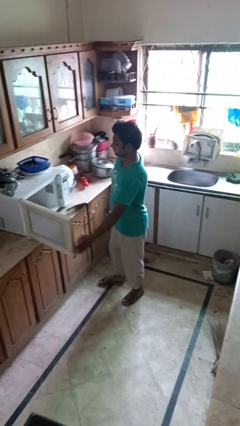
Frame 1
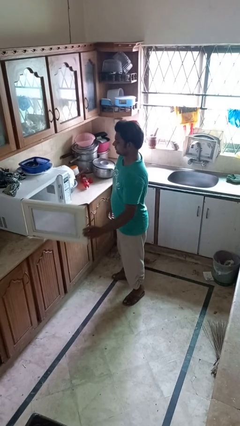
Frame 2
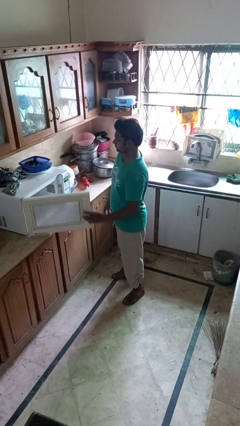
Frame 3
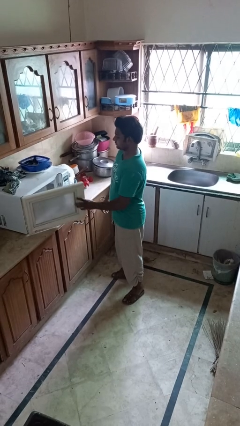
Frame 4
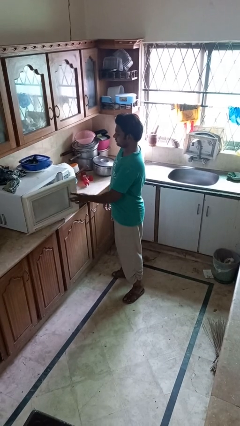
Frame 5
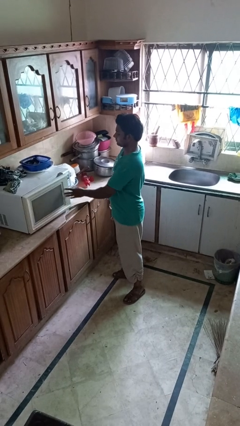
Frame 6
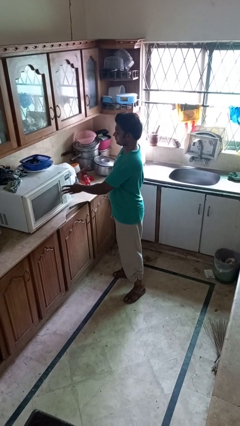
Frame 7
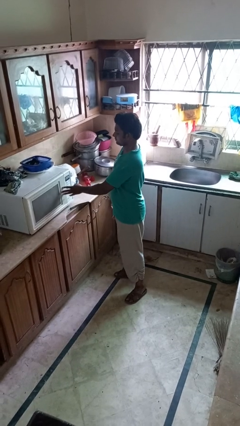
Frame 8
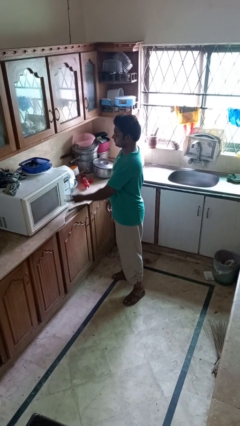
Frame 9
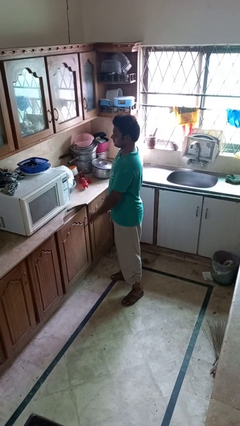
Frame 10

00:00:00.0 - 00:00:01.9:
person closes microwave

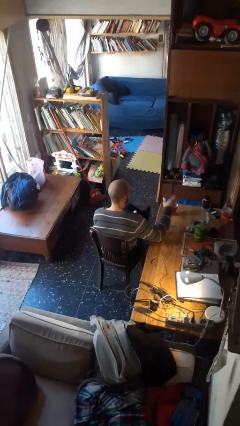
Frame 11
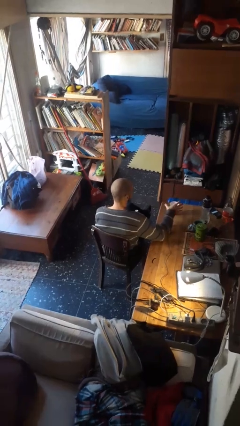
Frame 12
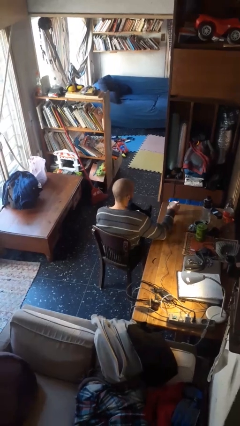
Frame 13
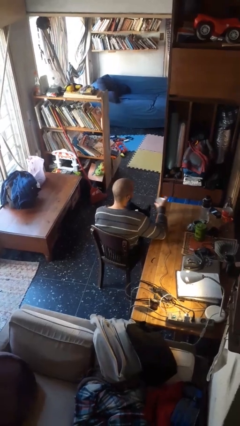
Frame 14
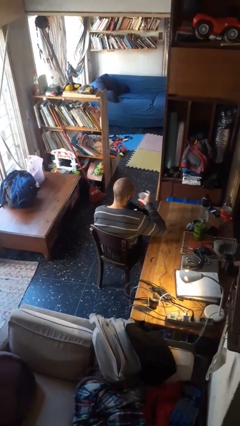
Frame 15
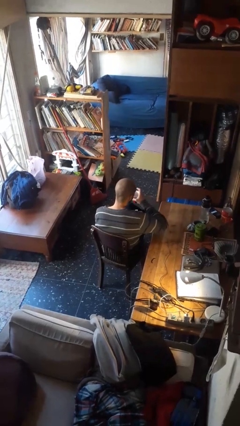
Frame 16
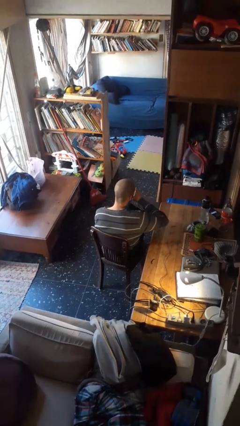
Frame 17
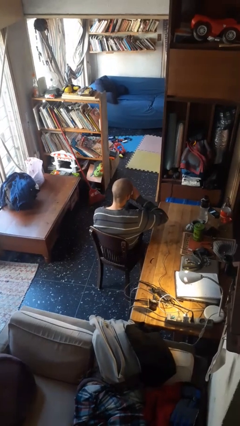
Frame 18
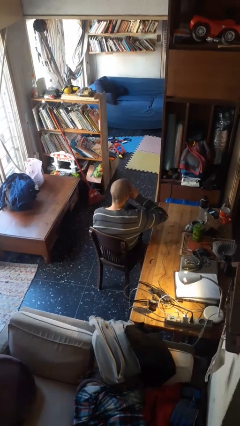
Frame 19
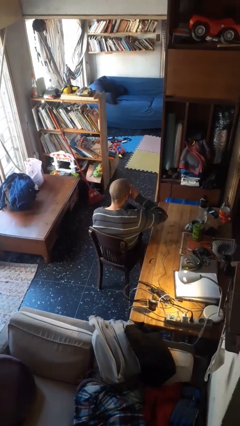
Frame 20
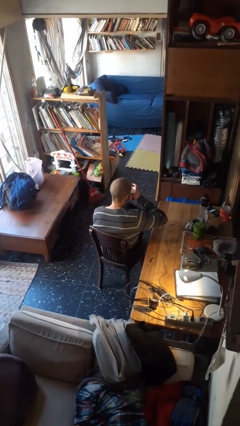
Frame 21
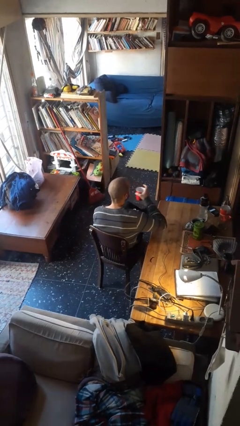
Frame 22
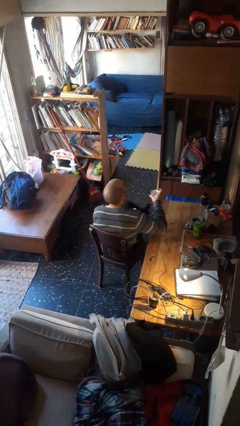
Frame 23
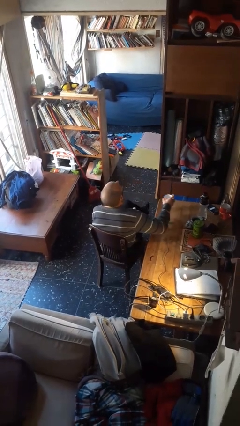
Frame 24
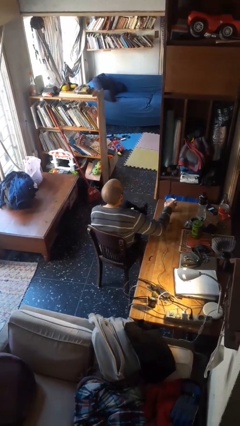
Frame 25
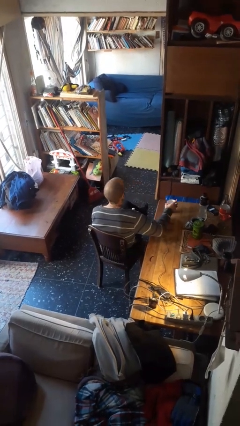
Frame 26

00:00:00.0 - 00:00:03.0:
person drinks from cup

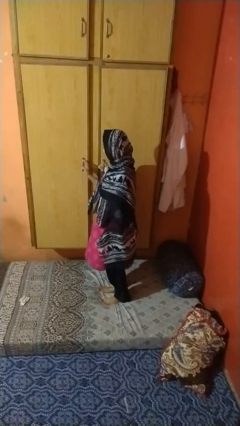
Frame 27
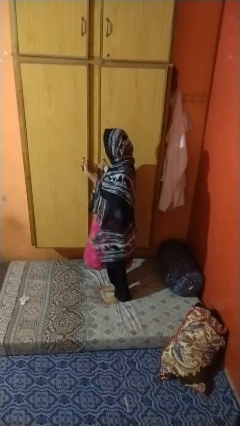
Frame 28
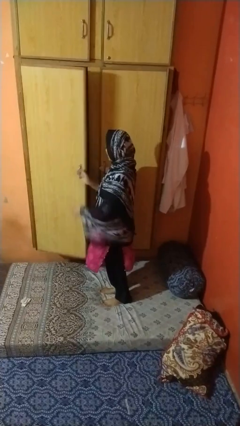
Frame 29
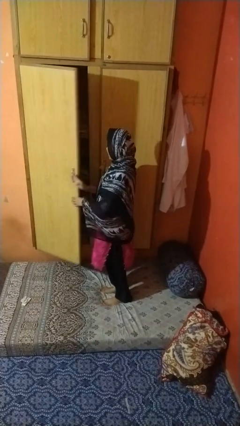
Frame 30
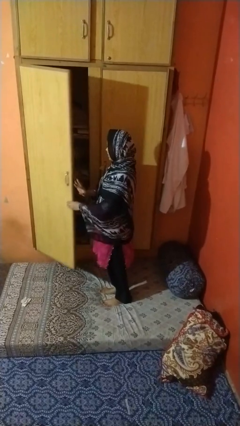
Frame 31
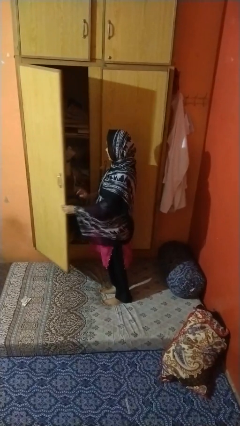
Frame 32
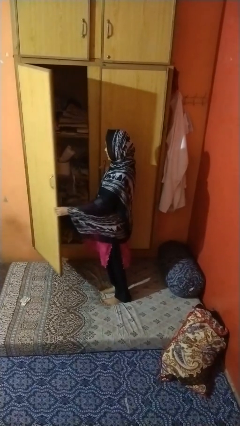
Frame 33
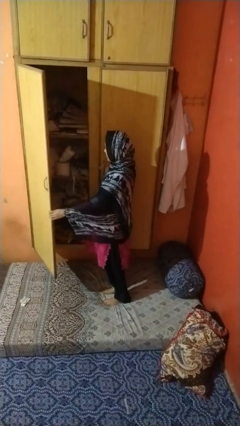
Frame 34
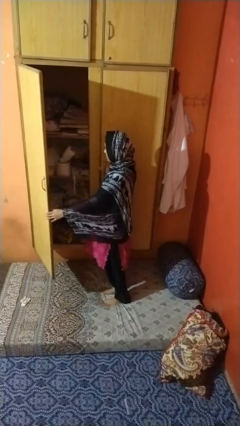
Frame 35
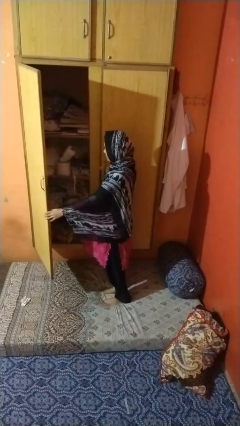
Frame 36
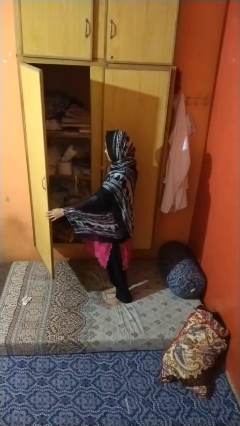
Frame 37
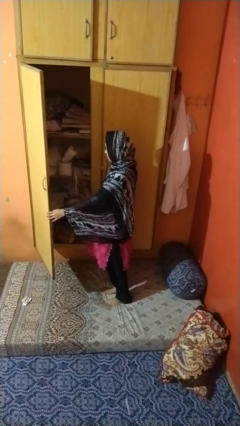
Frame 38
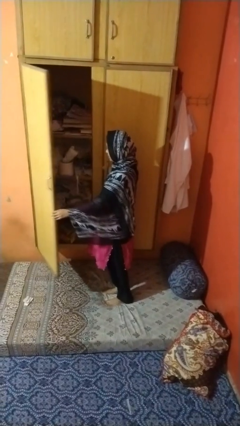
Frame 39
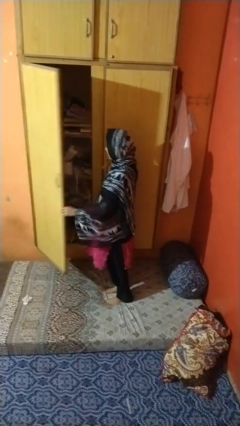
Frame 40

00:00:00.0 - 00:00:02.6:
person opens closet door

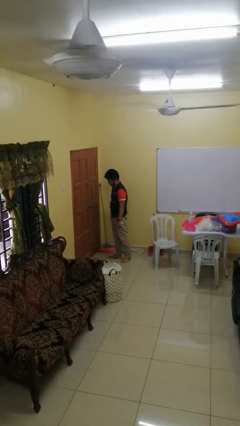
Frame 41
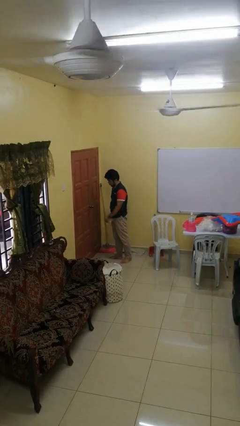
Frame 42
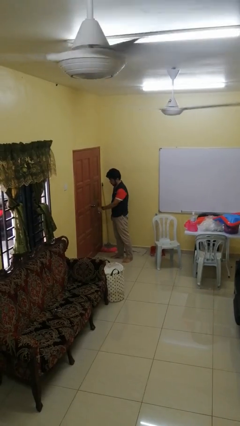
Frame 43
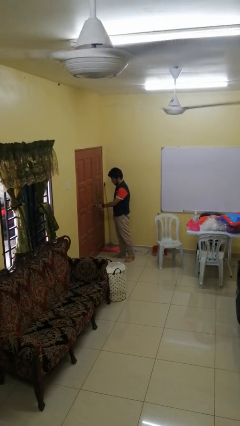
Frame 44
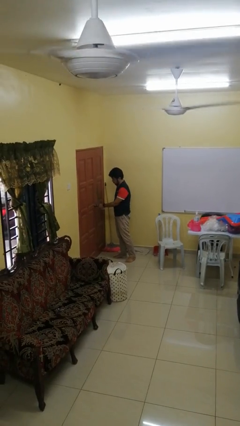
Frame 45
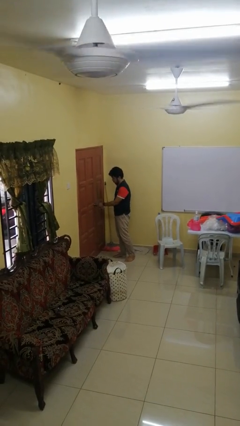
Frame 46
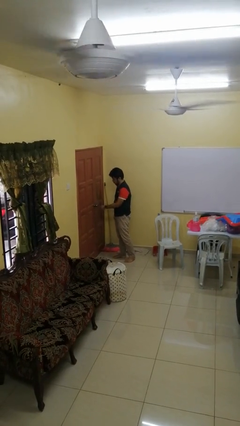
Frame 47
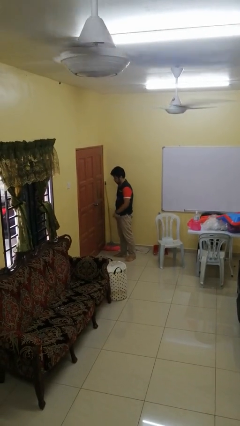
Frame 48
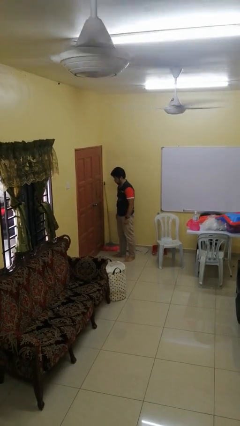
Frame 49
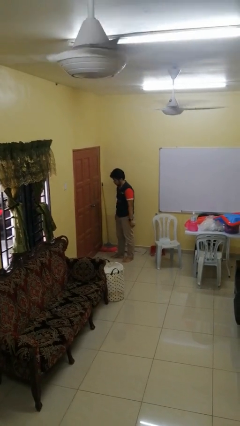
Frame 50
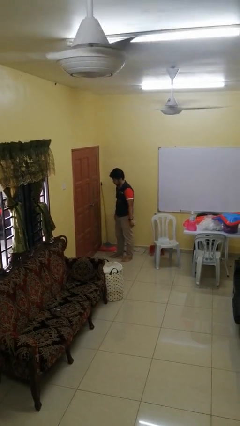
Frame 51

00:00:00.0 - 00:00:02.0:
person unlocks door with keys

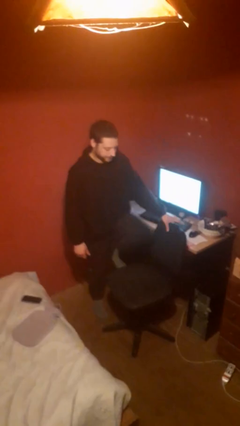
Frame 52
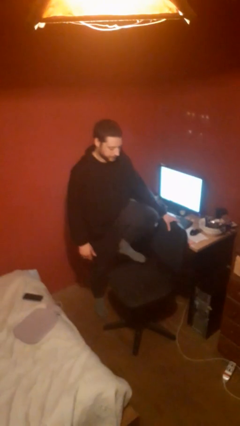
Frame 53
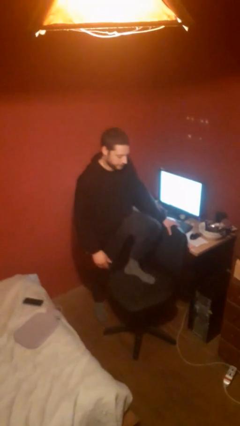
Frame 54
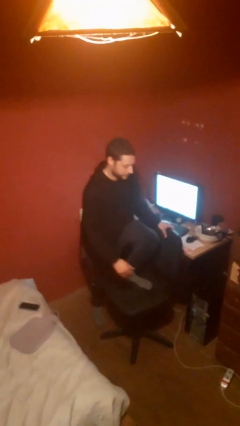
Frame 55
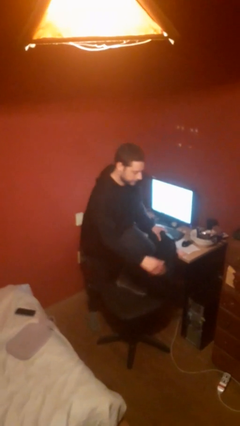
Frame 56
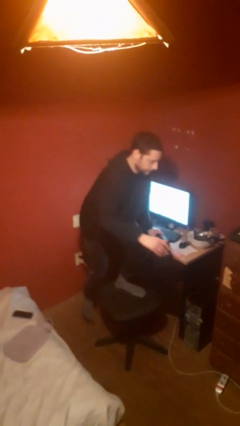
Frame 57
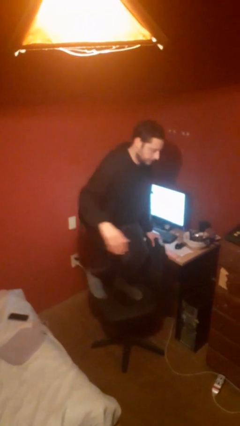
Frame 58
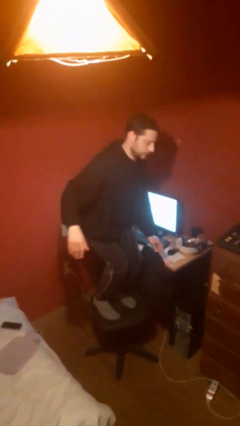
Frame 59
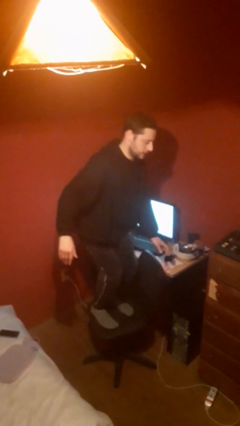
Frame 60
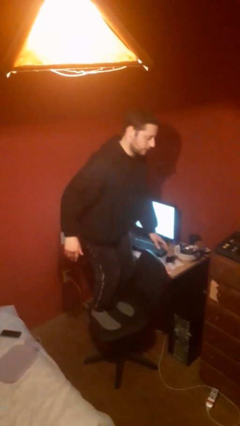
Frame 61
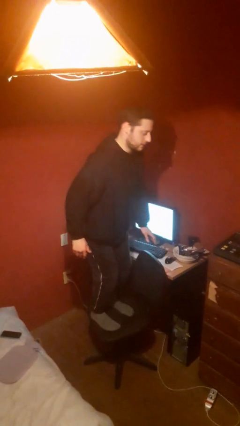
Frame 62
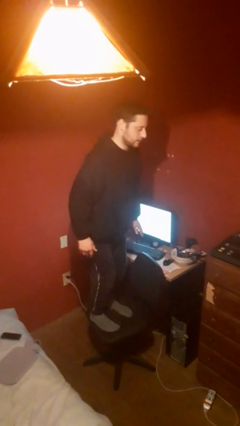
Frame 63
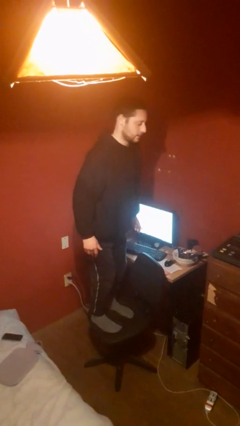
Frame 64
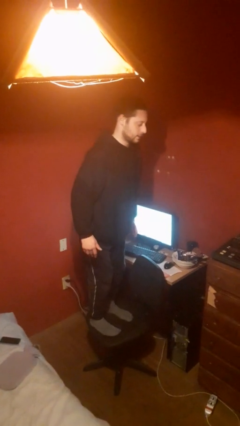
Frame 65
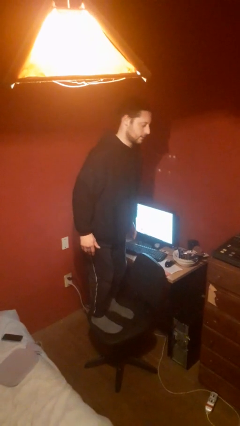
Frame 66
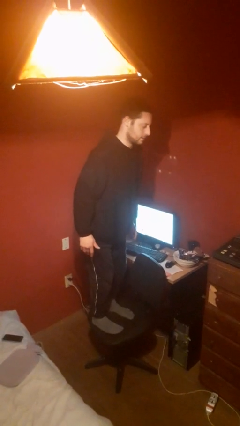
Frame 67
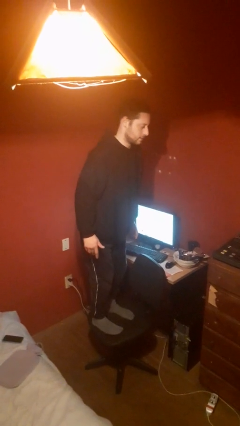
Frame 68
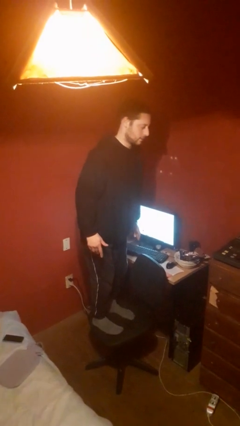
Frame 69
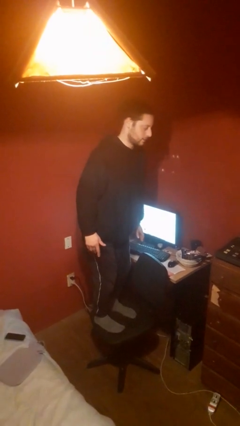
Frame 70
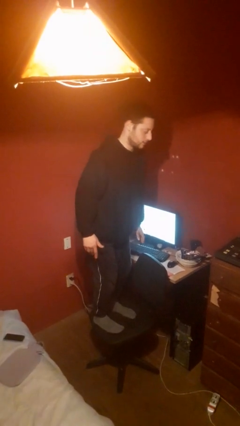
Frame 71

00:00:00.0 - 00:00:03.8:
person climbs on chair

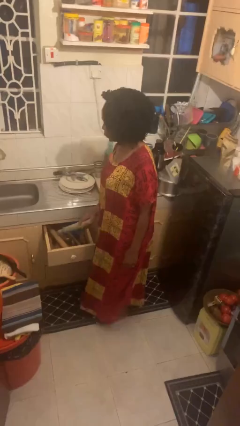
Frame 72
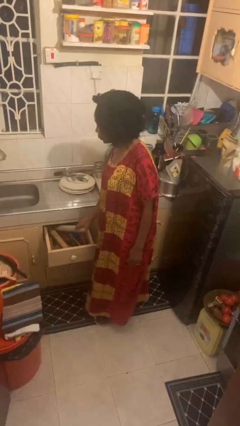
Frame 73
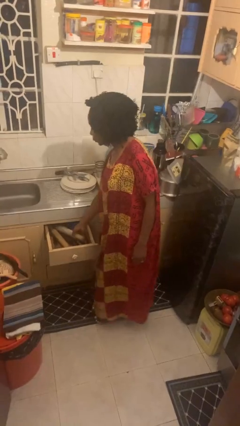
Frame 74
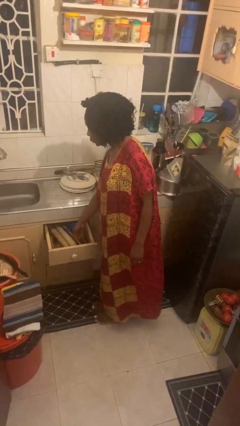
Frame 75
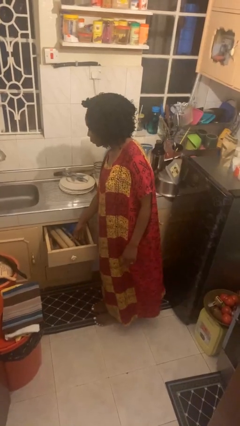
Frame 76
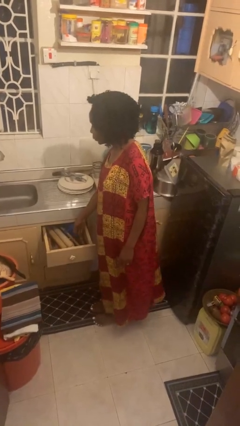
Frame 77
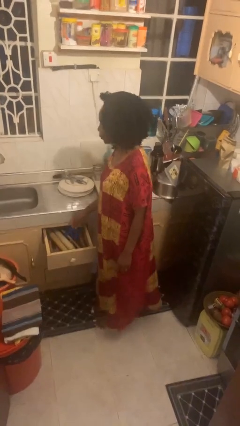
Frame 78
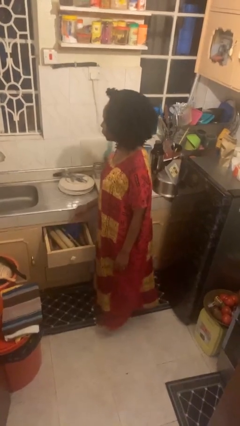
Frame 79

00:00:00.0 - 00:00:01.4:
person puts object into kitchen drawer

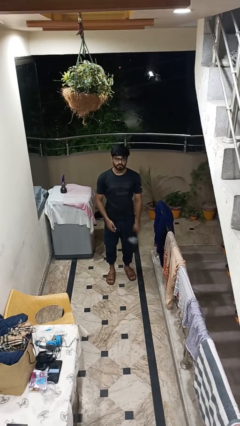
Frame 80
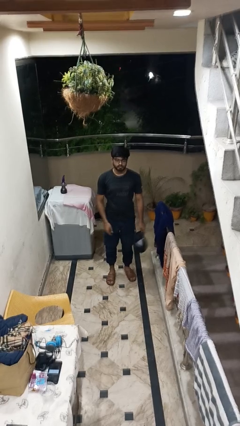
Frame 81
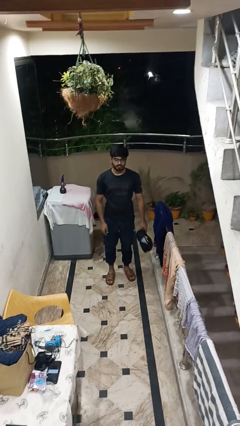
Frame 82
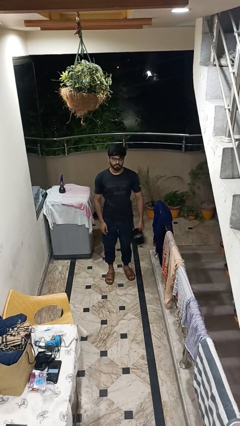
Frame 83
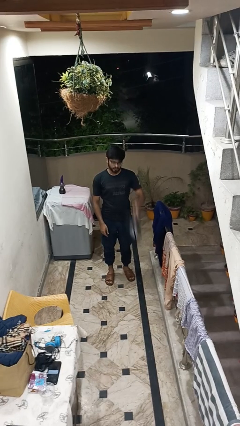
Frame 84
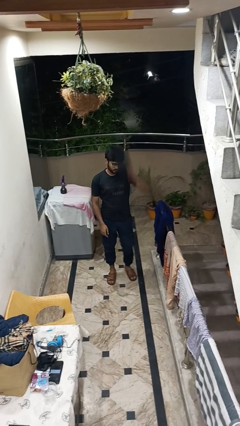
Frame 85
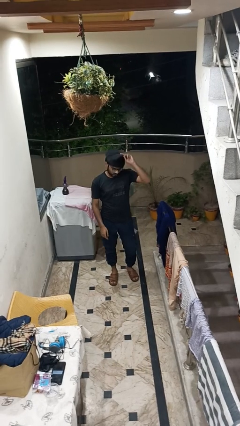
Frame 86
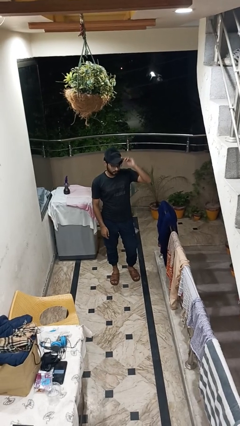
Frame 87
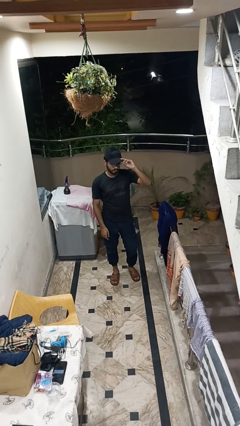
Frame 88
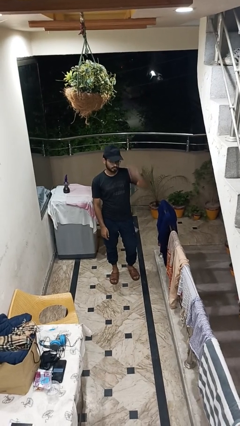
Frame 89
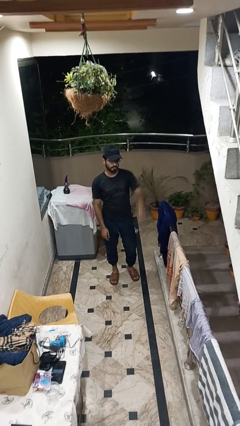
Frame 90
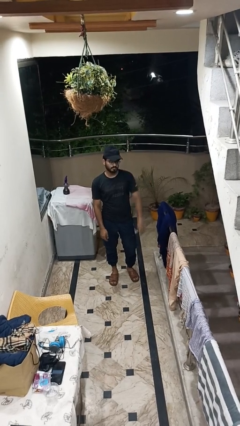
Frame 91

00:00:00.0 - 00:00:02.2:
person puts on hat
